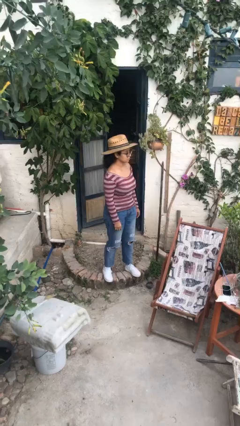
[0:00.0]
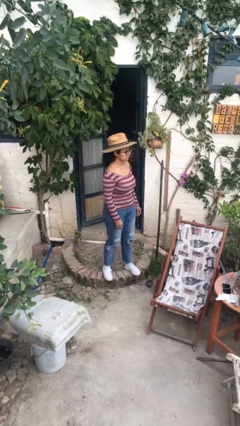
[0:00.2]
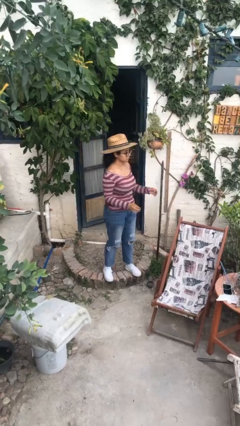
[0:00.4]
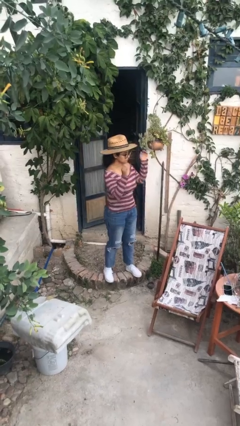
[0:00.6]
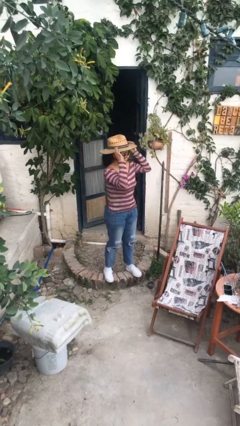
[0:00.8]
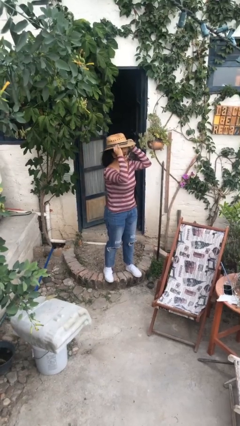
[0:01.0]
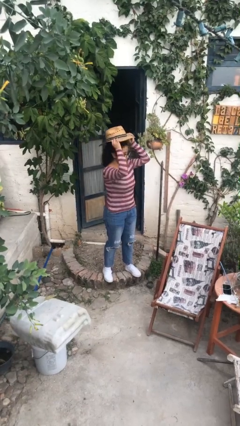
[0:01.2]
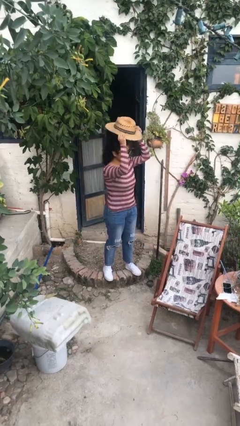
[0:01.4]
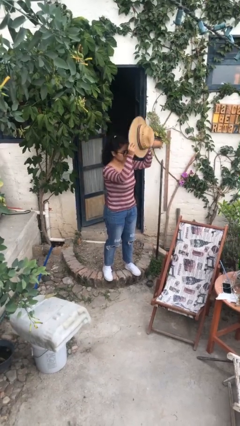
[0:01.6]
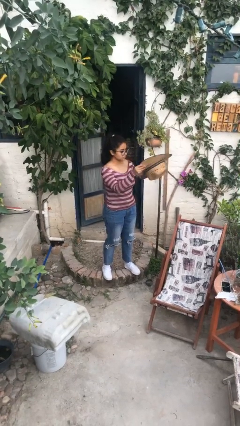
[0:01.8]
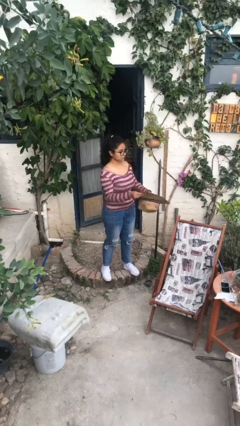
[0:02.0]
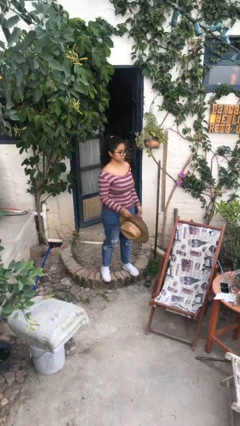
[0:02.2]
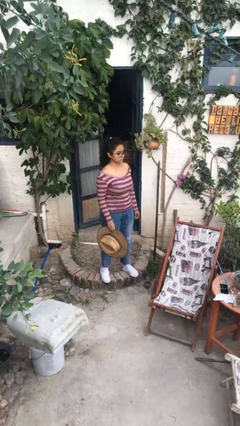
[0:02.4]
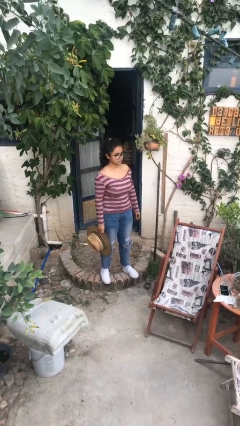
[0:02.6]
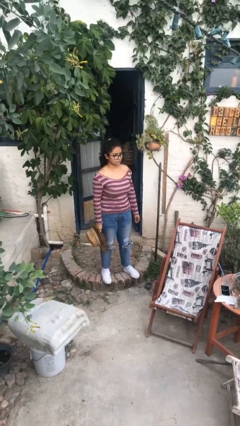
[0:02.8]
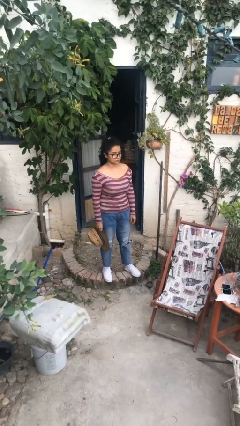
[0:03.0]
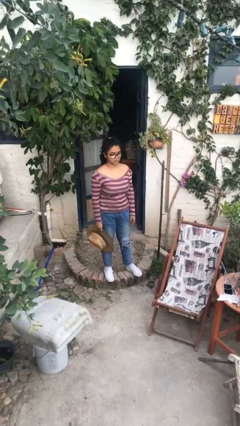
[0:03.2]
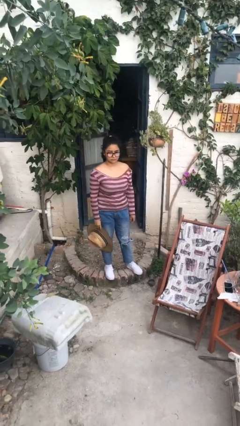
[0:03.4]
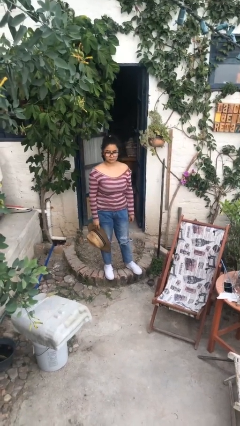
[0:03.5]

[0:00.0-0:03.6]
person takes off hat

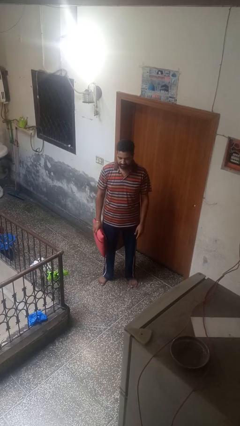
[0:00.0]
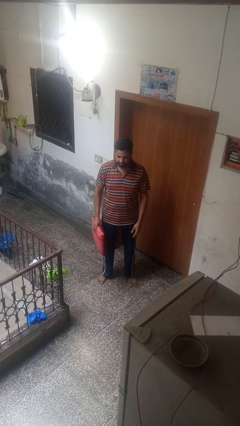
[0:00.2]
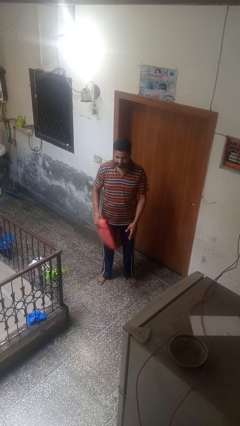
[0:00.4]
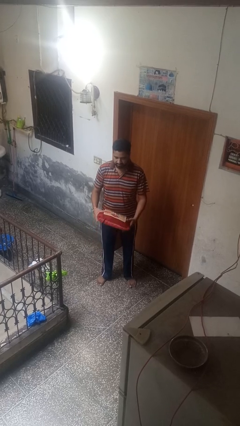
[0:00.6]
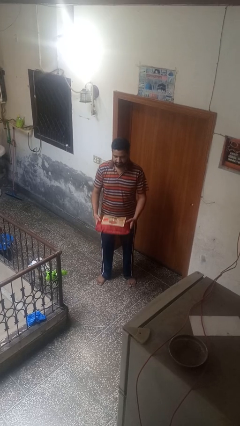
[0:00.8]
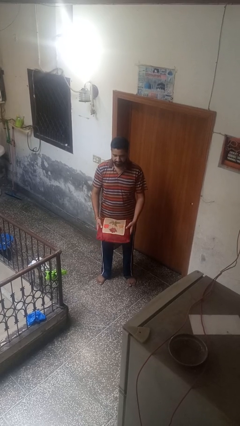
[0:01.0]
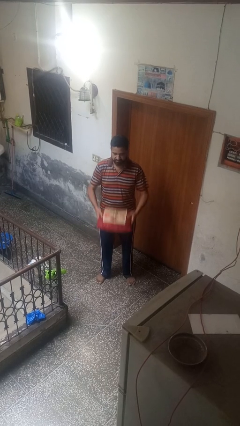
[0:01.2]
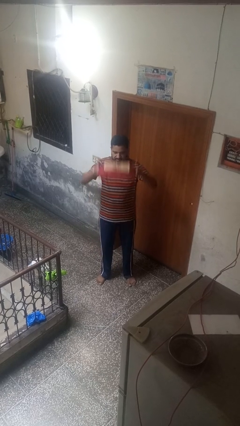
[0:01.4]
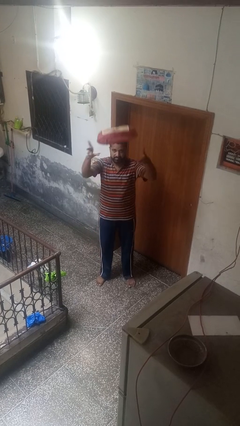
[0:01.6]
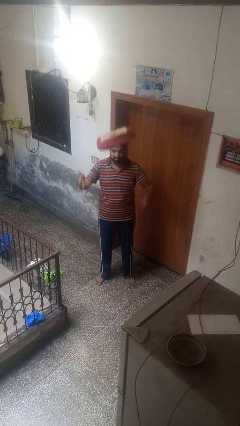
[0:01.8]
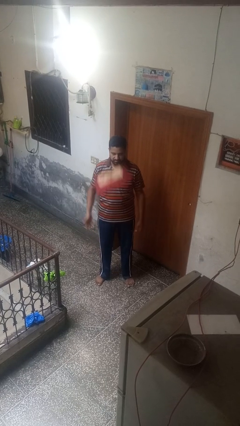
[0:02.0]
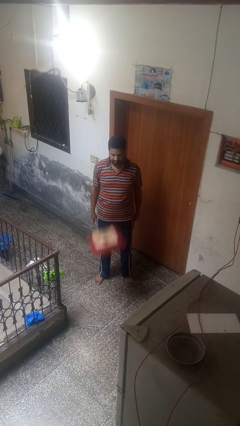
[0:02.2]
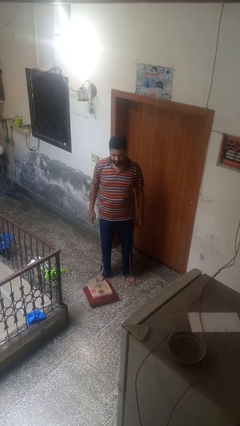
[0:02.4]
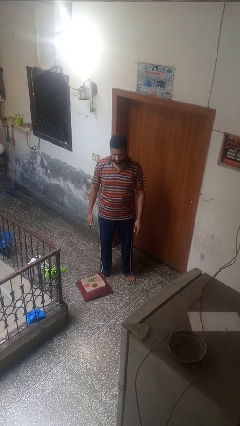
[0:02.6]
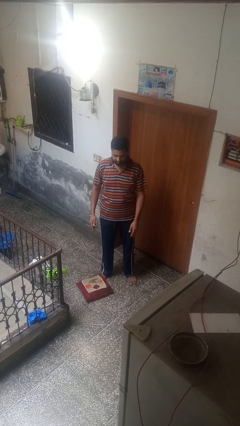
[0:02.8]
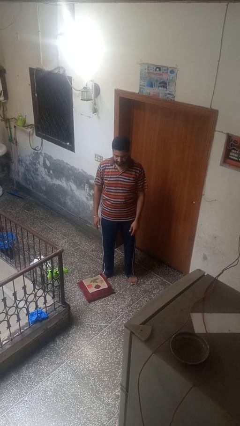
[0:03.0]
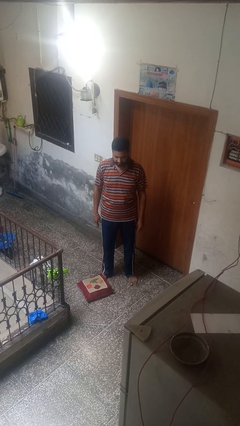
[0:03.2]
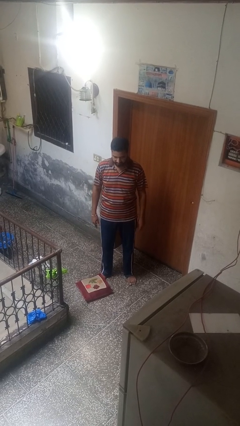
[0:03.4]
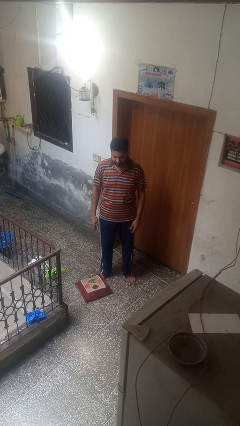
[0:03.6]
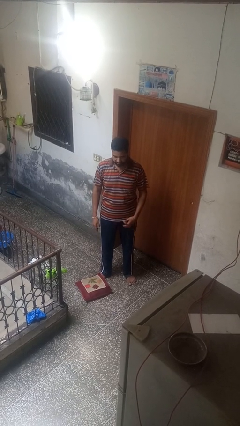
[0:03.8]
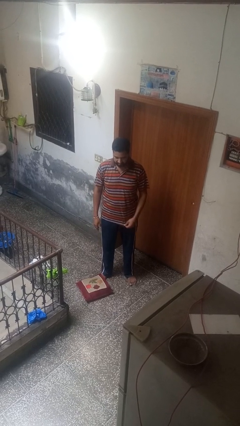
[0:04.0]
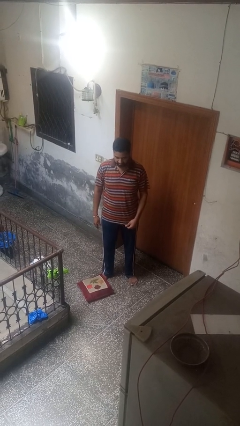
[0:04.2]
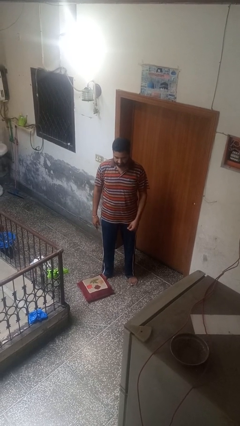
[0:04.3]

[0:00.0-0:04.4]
person throws object into air

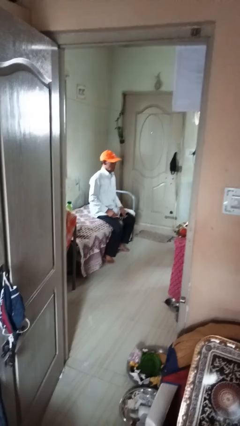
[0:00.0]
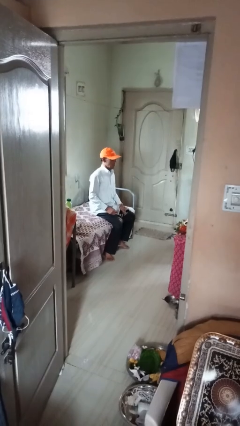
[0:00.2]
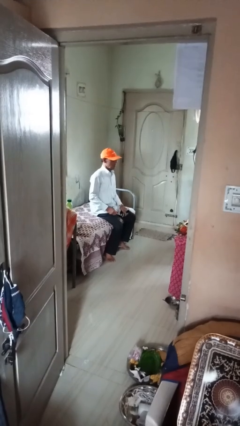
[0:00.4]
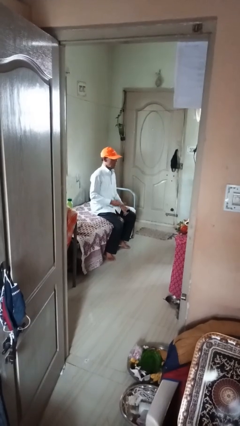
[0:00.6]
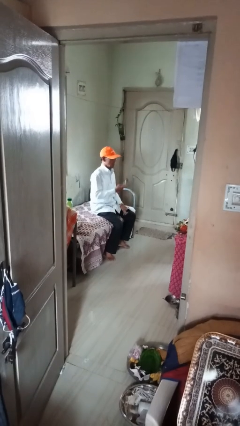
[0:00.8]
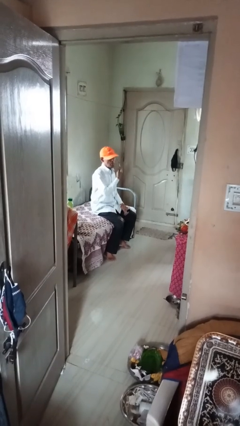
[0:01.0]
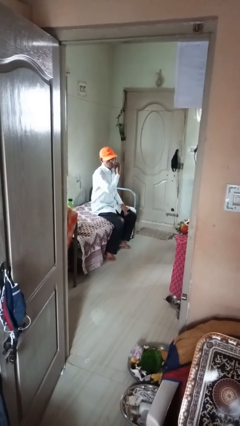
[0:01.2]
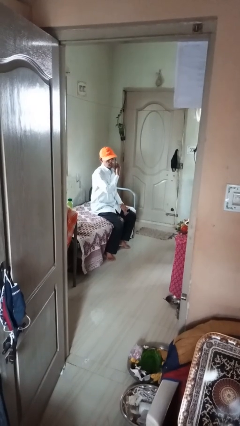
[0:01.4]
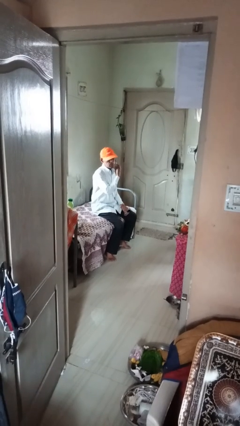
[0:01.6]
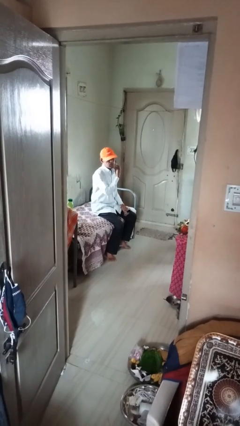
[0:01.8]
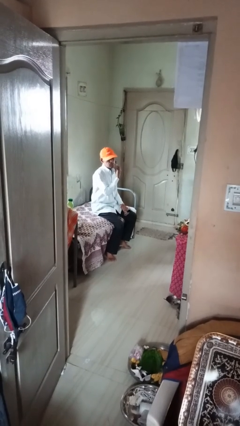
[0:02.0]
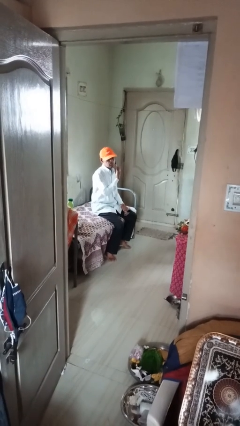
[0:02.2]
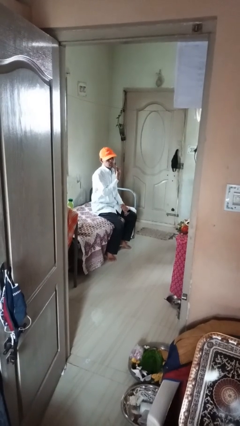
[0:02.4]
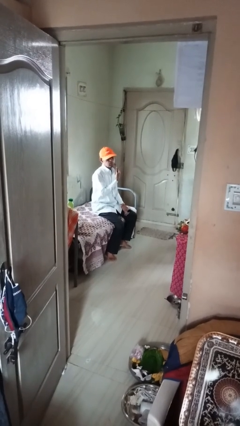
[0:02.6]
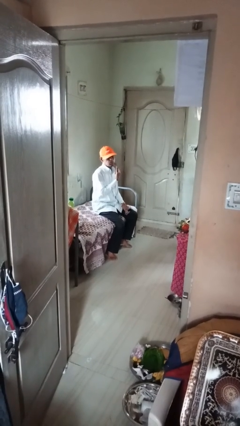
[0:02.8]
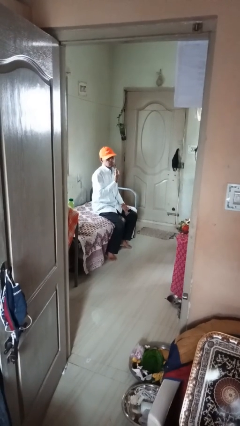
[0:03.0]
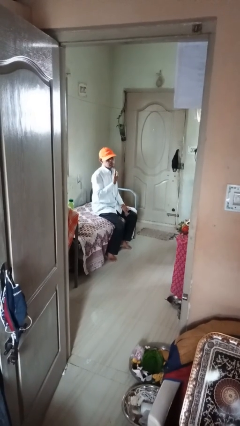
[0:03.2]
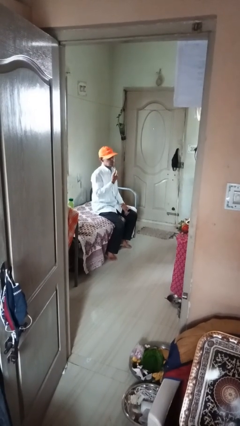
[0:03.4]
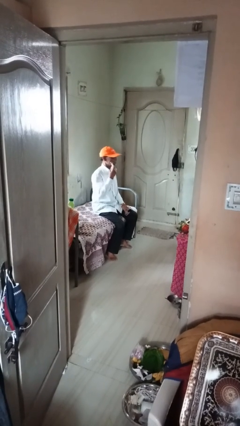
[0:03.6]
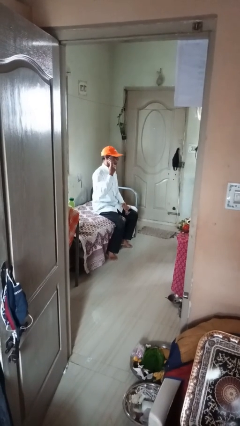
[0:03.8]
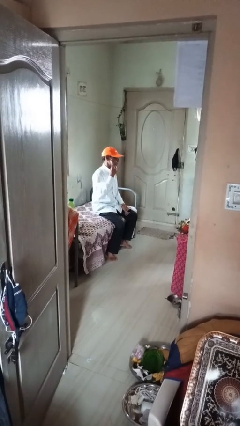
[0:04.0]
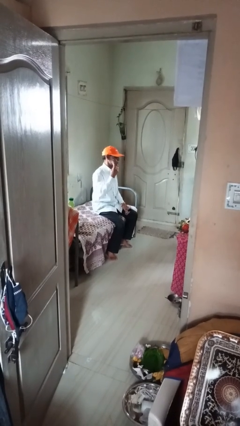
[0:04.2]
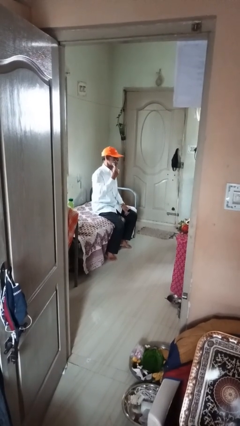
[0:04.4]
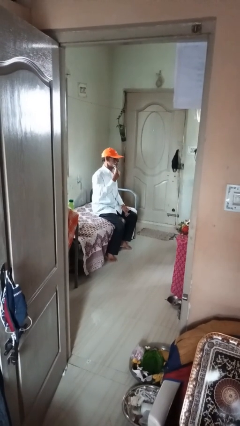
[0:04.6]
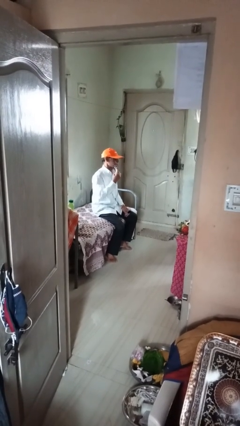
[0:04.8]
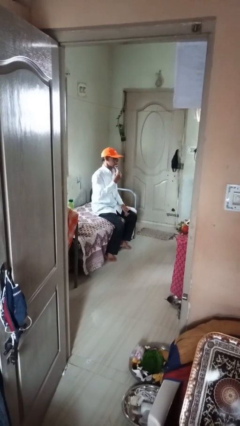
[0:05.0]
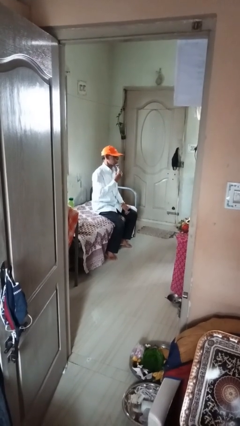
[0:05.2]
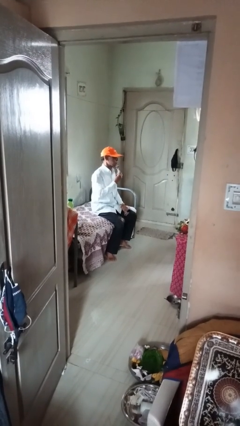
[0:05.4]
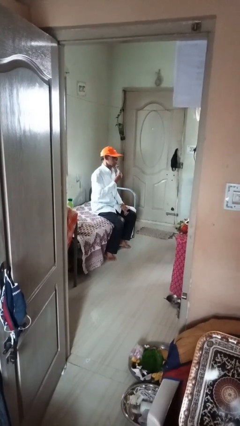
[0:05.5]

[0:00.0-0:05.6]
person shaves face

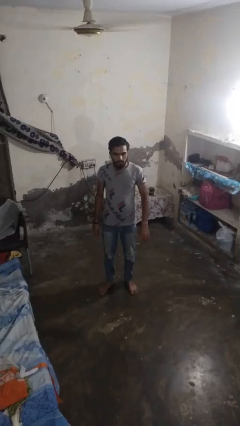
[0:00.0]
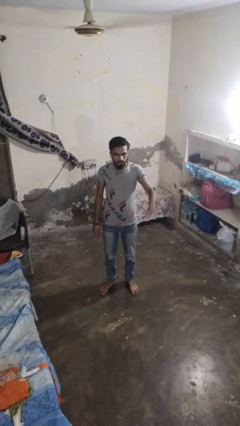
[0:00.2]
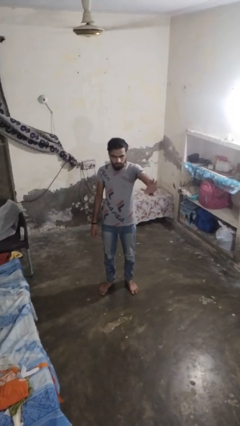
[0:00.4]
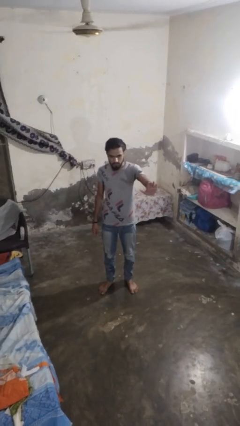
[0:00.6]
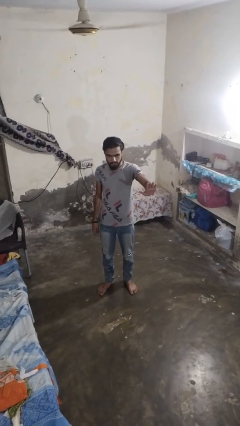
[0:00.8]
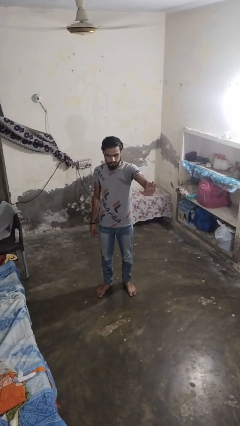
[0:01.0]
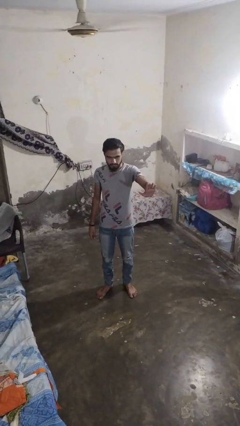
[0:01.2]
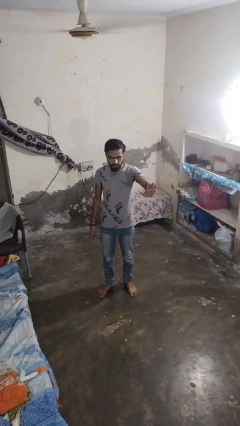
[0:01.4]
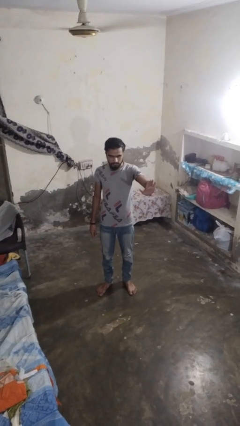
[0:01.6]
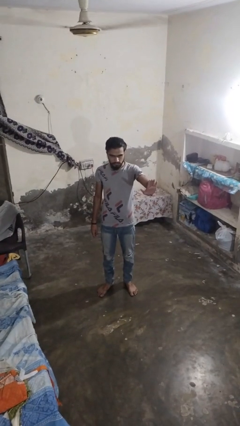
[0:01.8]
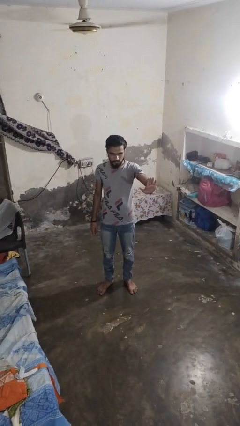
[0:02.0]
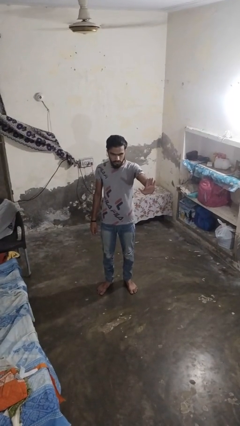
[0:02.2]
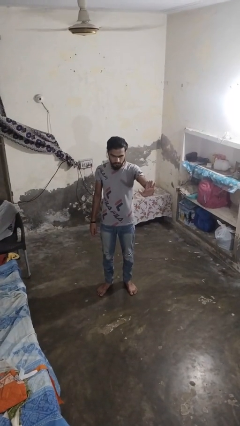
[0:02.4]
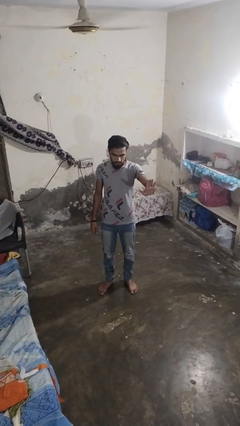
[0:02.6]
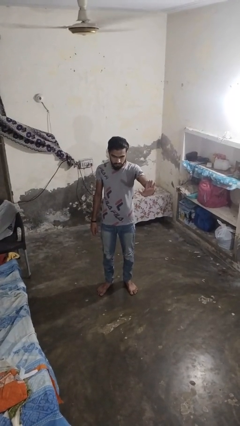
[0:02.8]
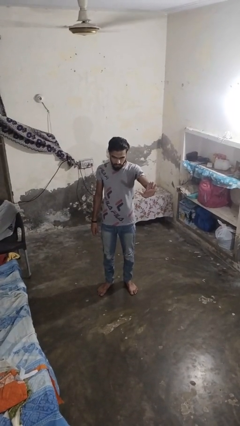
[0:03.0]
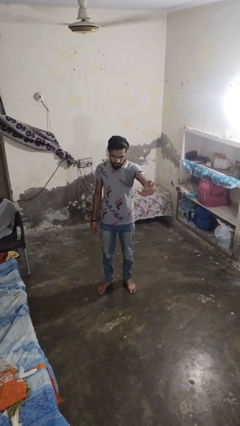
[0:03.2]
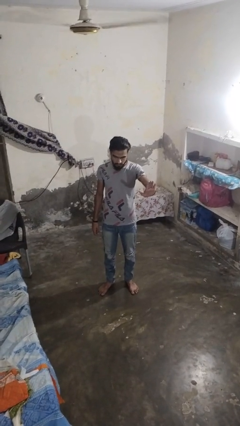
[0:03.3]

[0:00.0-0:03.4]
person gestures stop

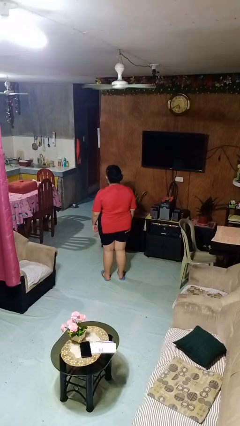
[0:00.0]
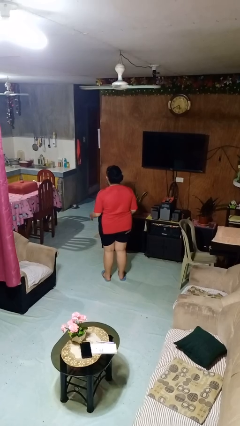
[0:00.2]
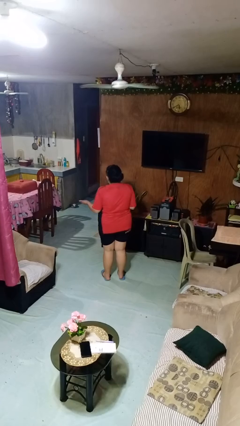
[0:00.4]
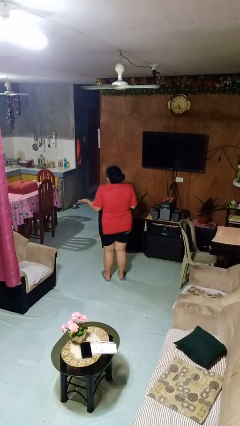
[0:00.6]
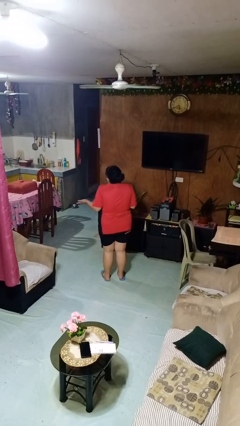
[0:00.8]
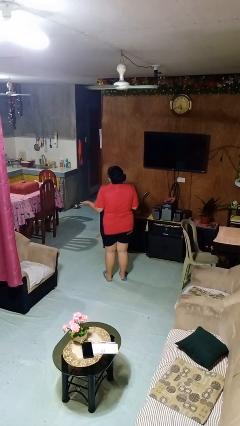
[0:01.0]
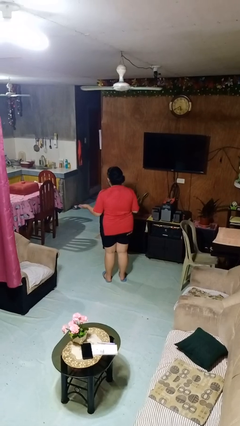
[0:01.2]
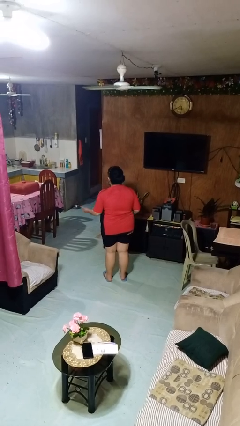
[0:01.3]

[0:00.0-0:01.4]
person shrugs
